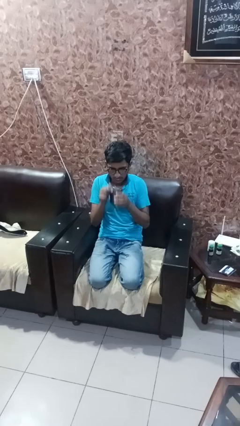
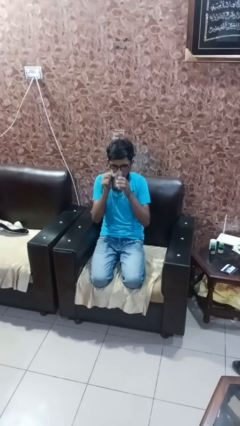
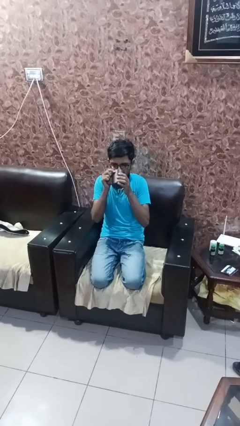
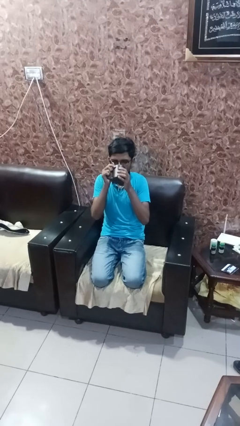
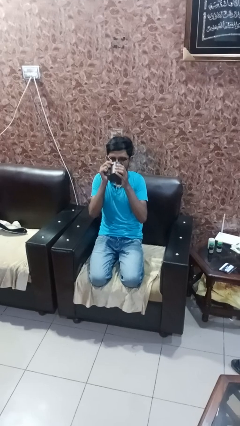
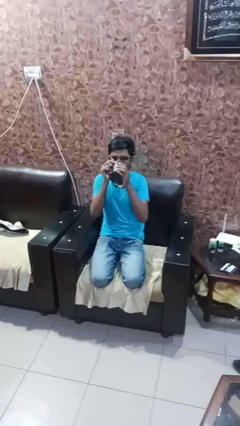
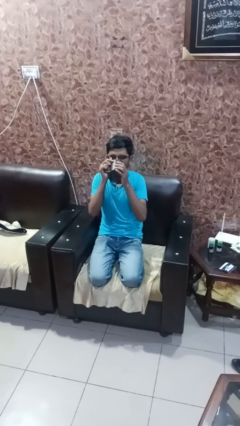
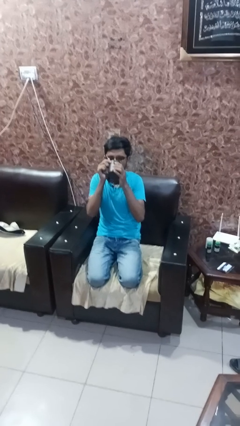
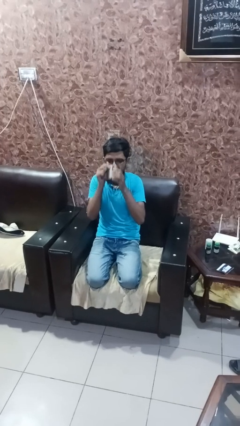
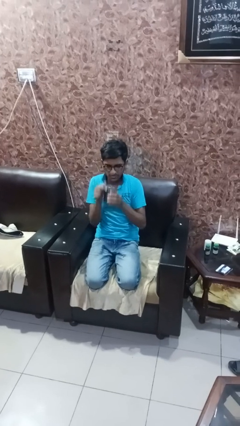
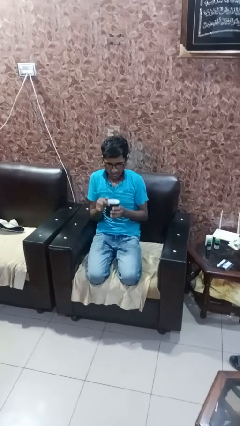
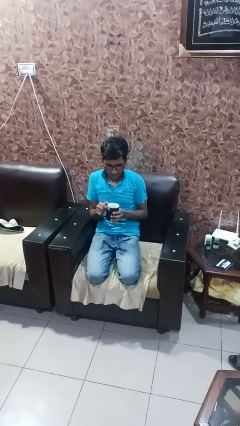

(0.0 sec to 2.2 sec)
person drinks from mug

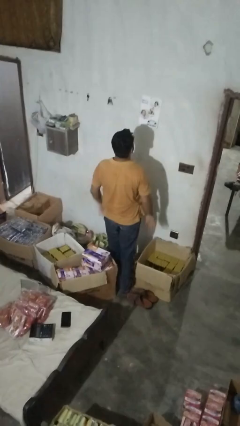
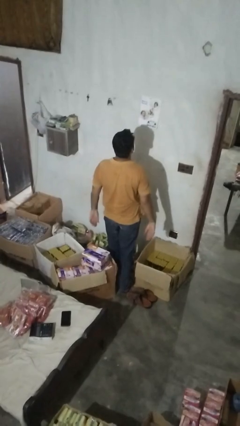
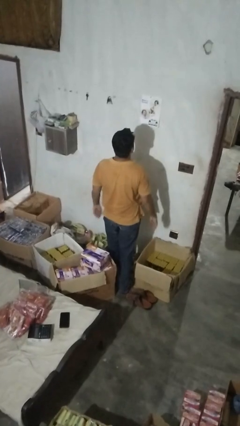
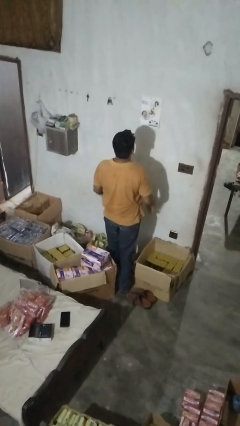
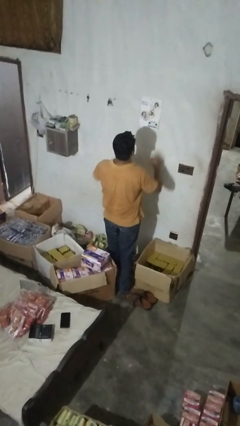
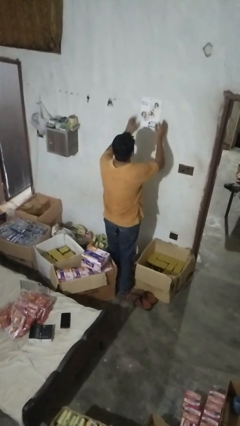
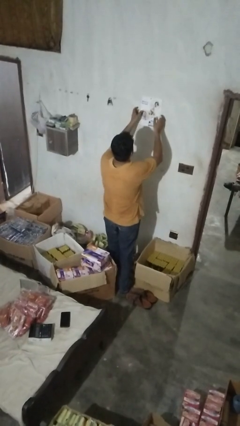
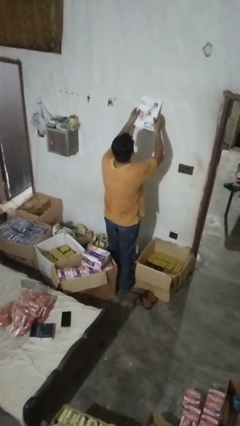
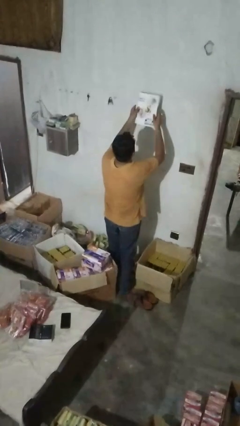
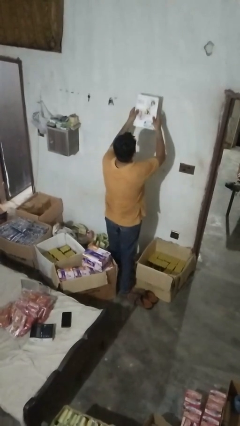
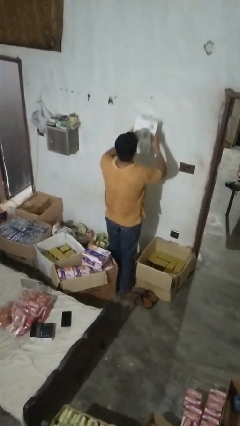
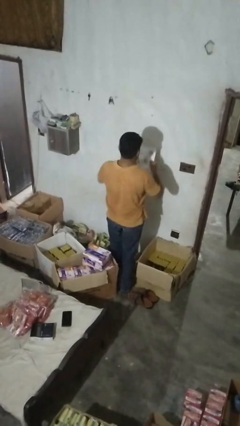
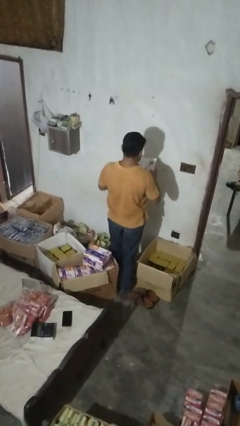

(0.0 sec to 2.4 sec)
person takes down picture frame

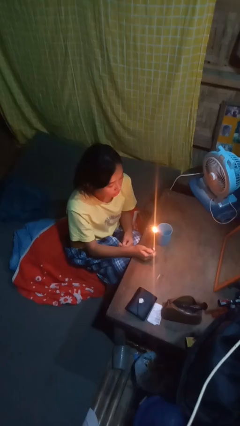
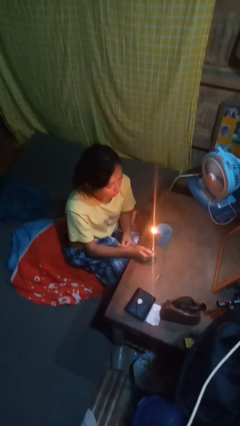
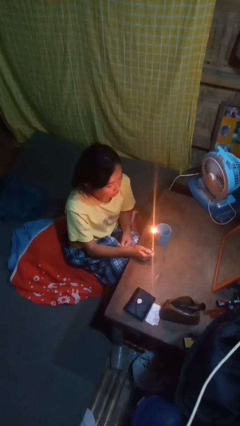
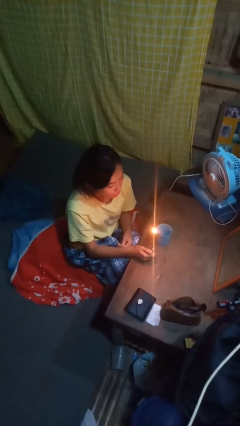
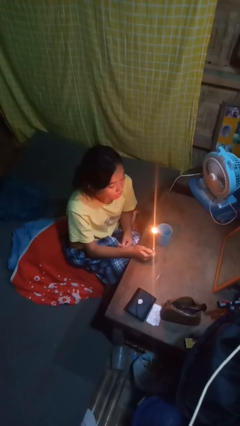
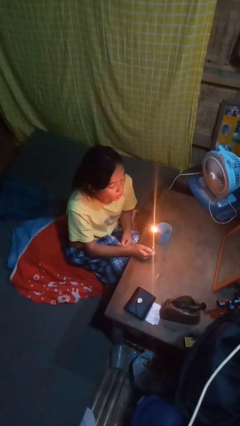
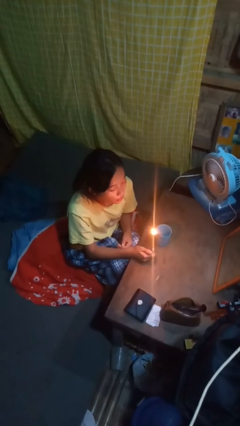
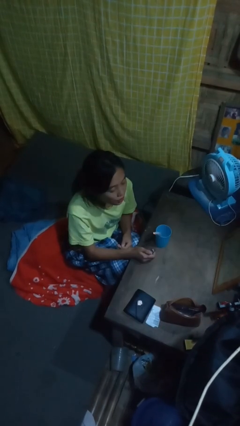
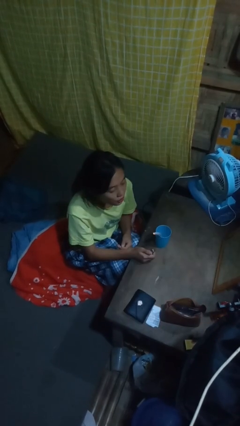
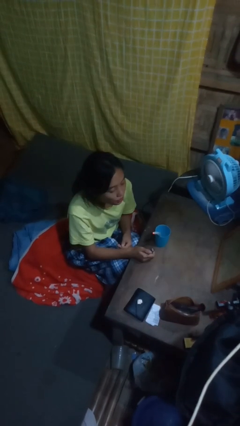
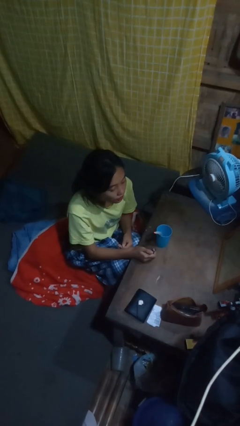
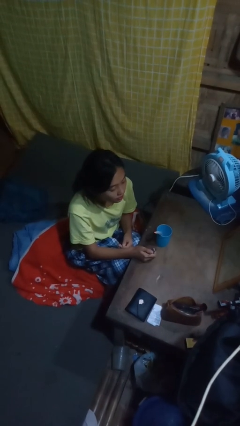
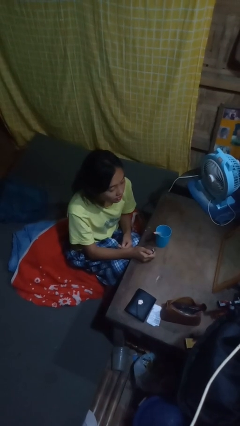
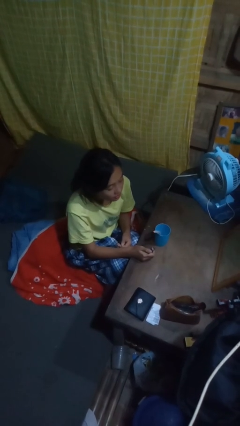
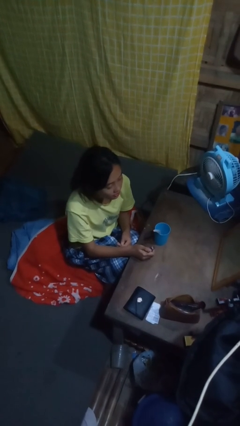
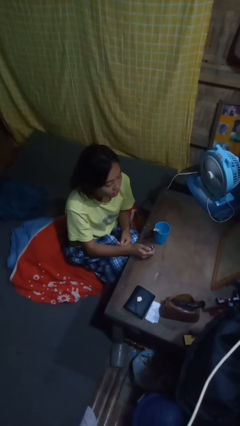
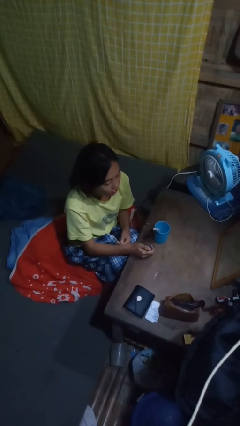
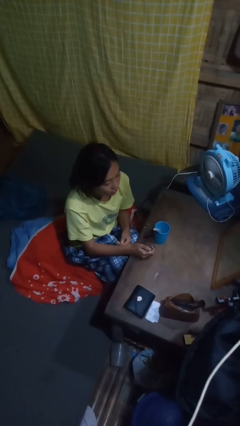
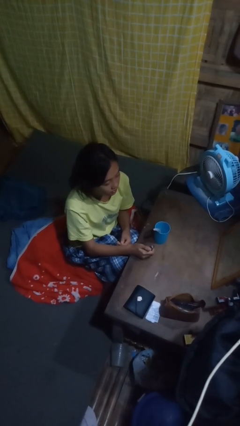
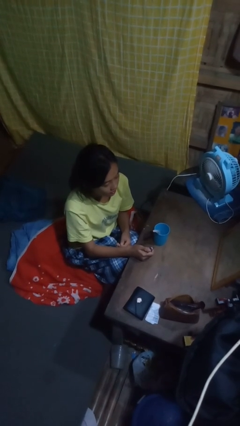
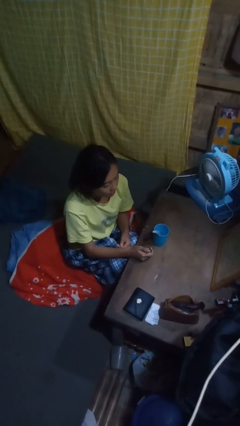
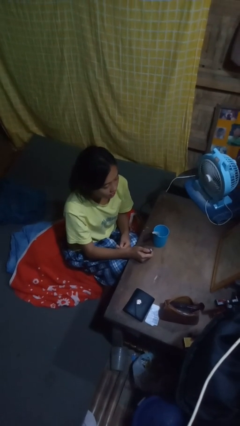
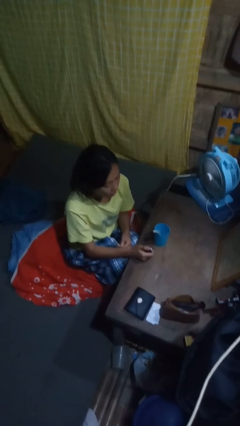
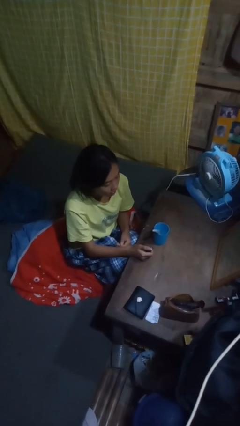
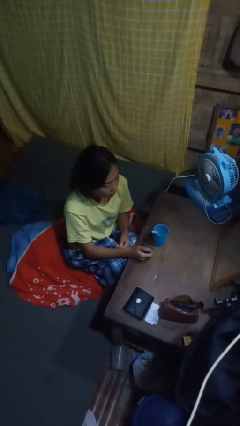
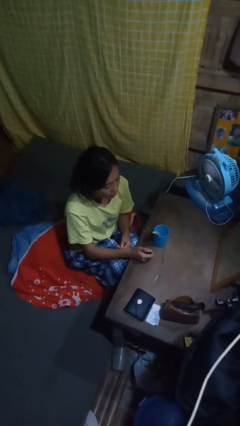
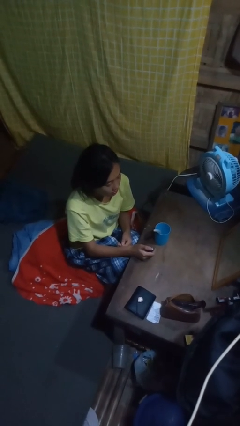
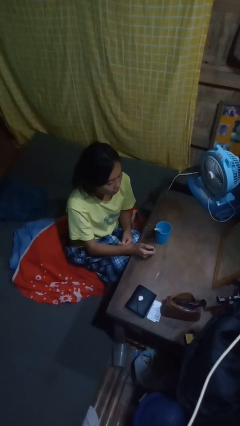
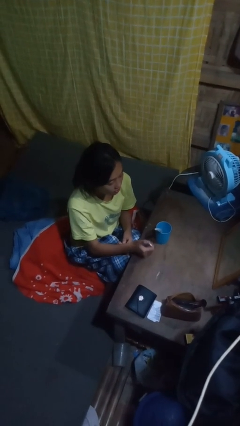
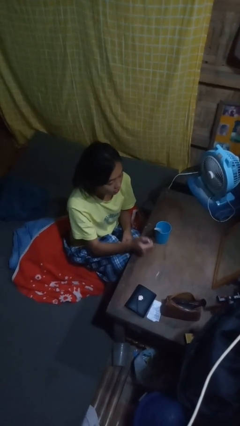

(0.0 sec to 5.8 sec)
person extinguishes candle

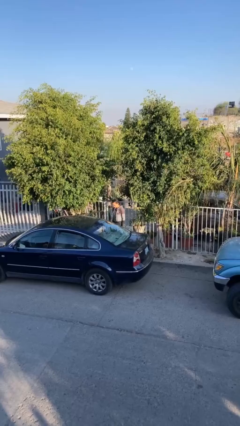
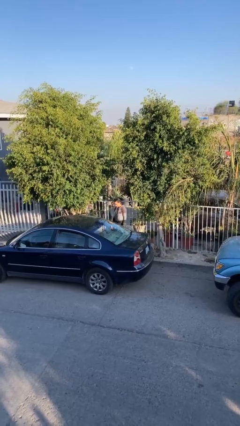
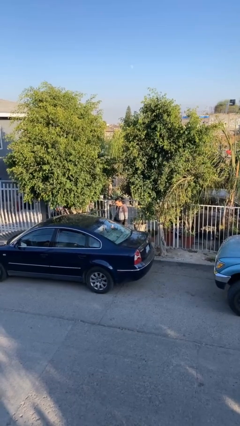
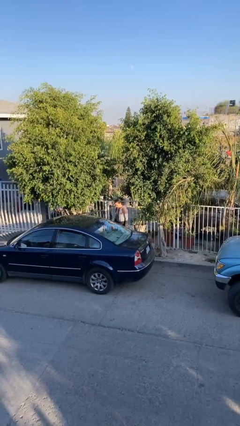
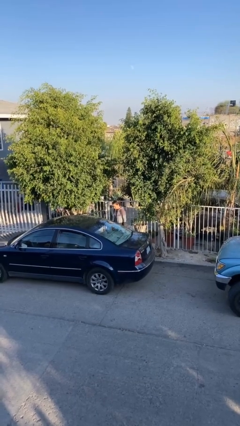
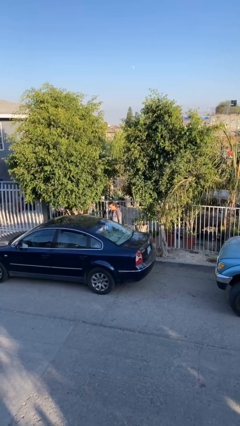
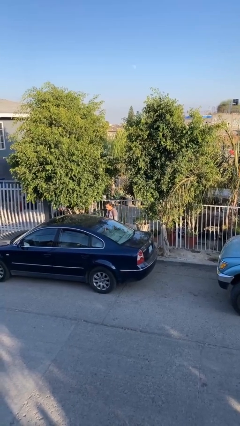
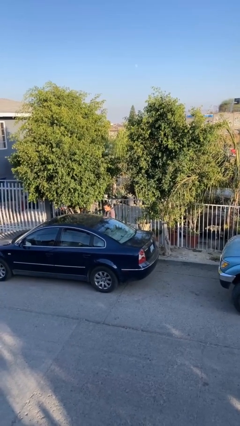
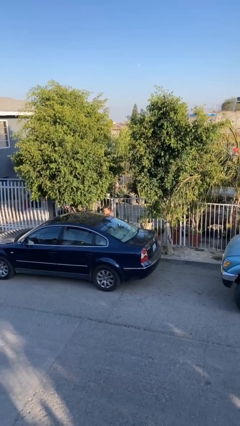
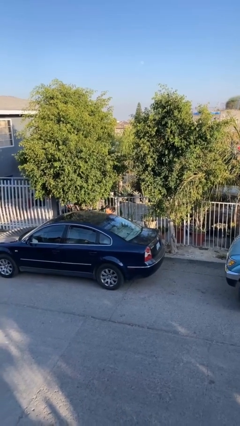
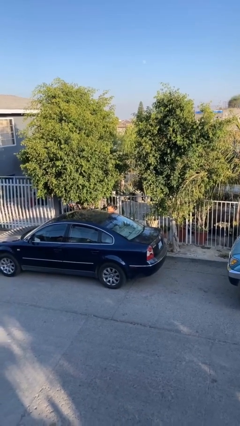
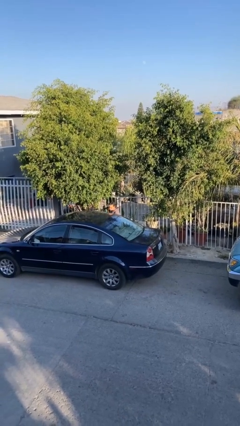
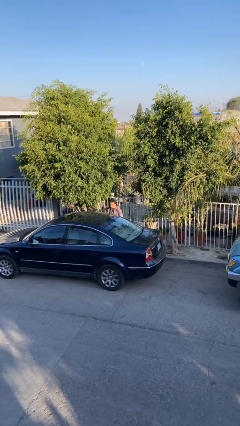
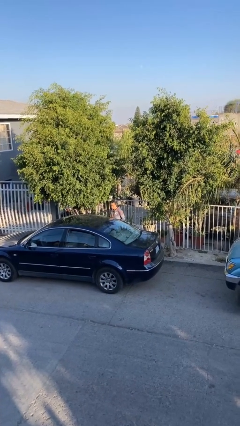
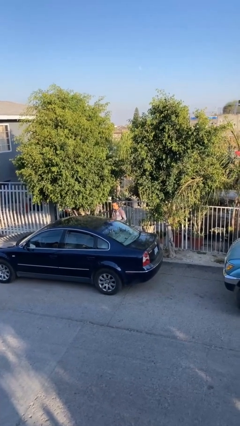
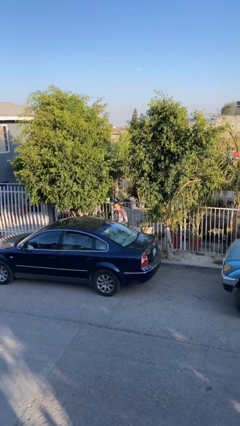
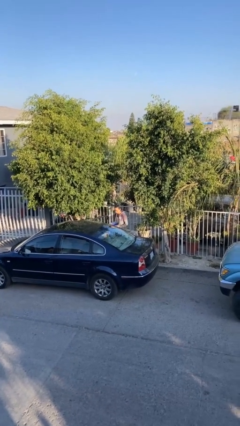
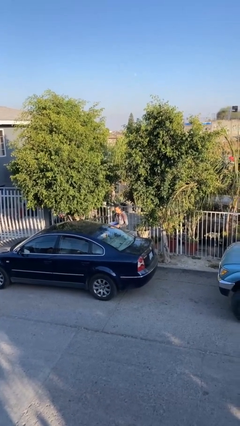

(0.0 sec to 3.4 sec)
person unloads car

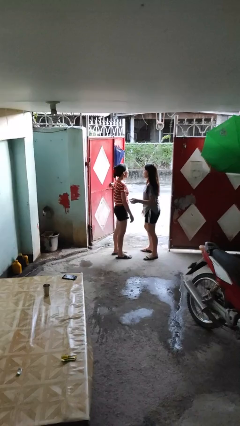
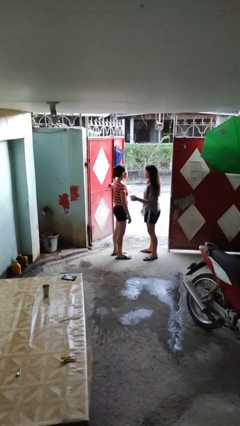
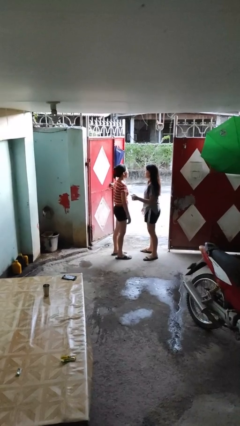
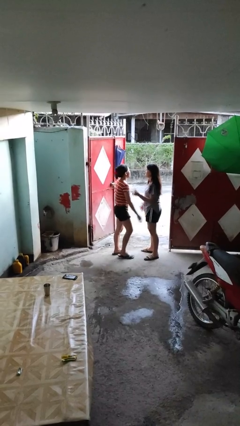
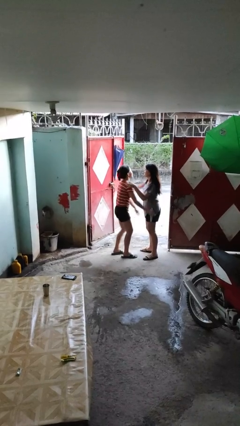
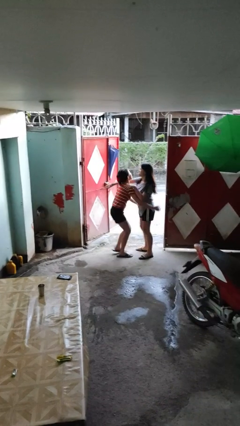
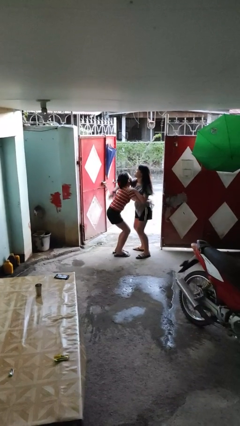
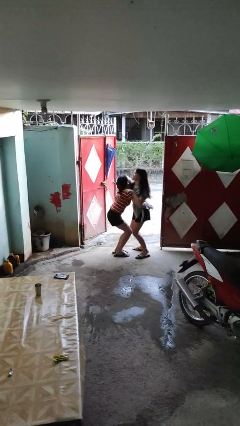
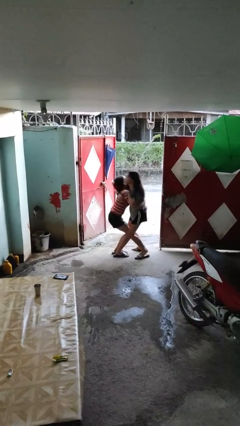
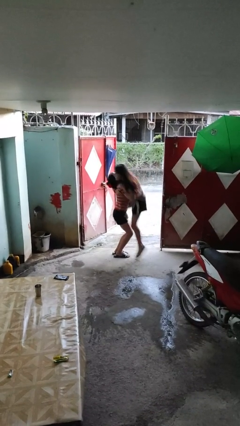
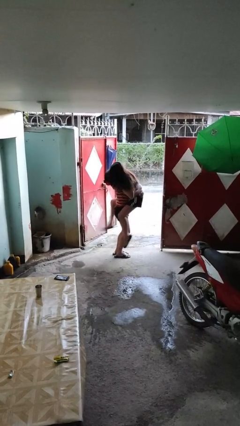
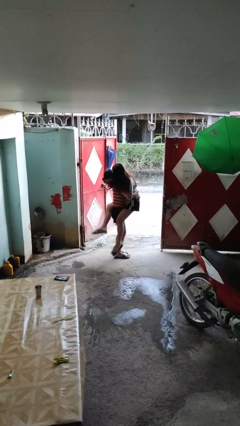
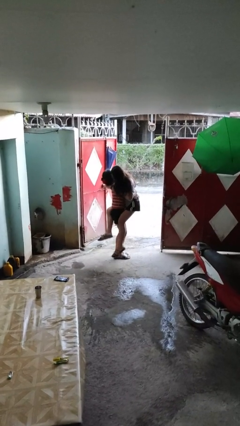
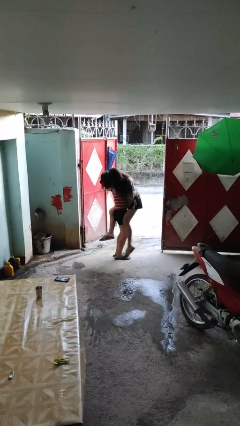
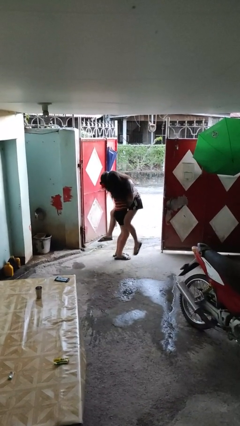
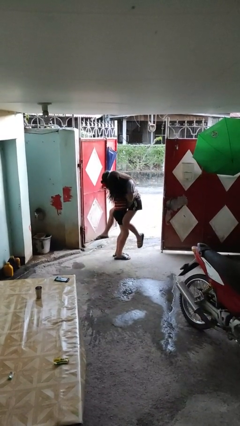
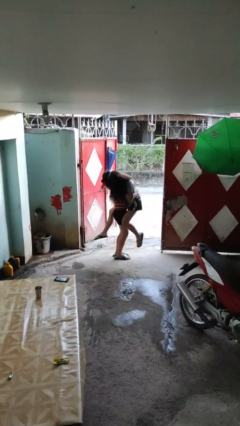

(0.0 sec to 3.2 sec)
person picks up person

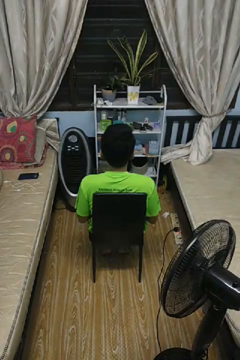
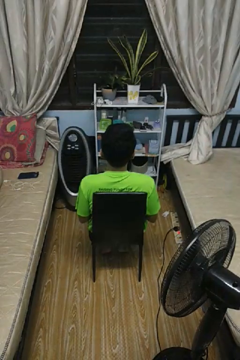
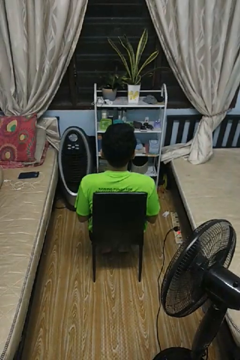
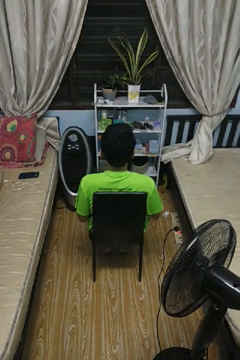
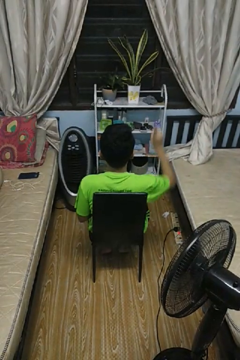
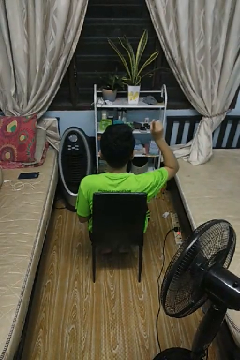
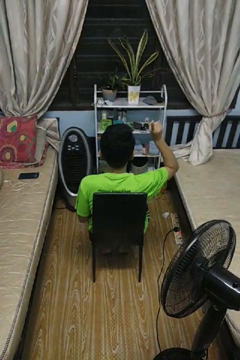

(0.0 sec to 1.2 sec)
person gestures number one
